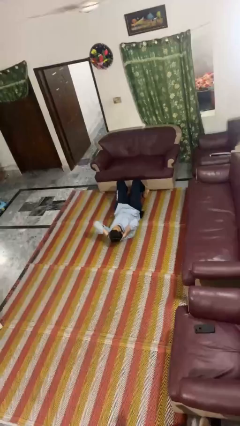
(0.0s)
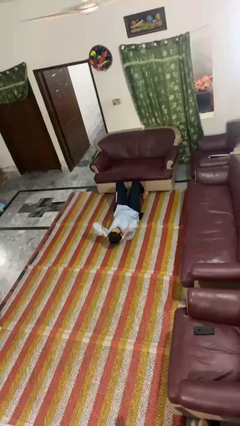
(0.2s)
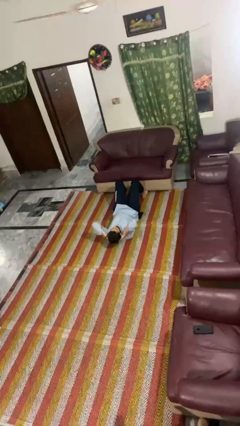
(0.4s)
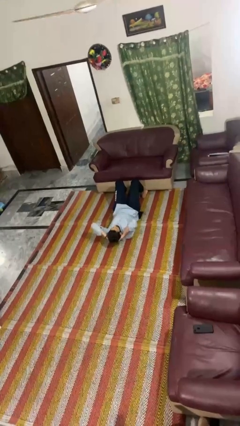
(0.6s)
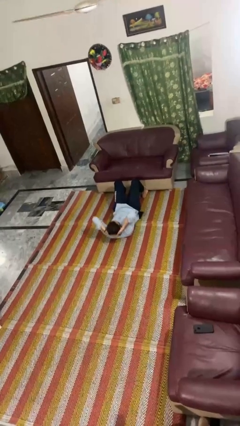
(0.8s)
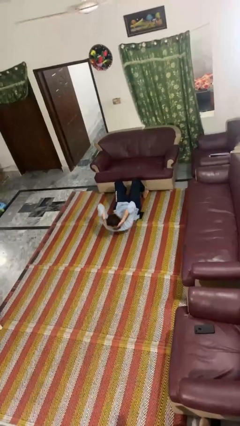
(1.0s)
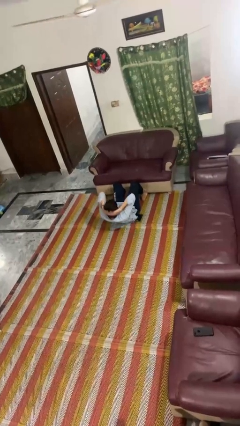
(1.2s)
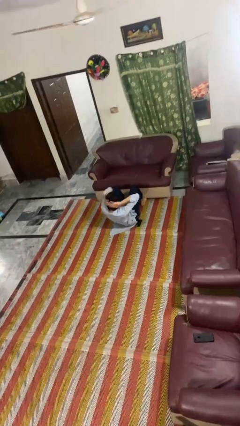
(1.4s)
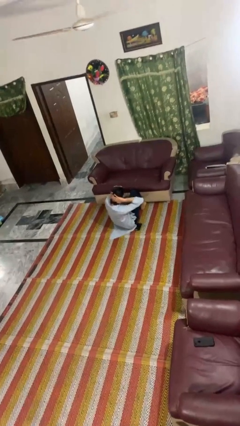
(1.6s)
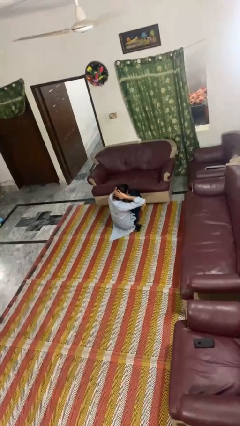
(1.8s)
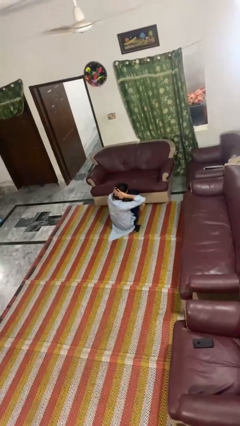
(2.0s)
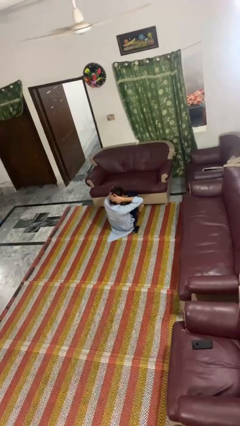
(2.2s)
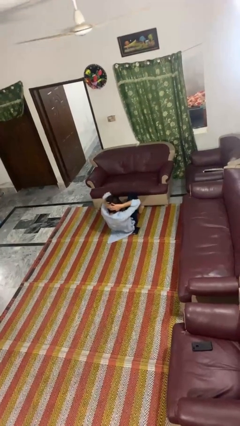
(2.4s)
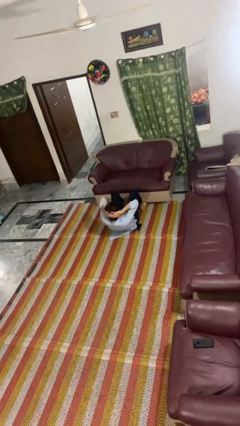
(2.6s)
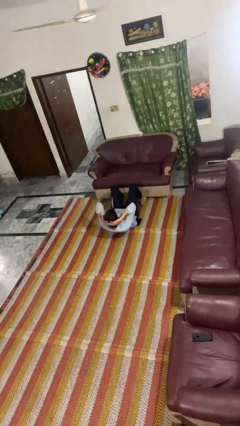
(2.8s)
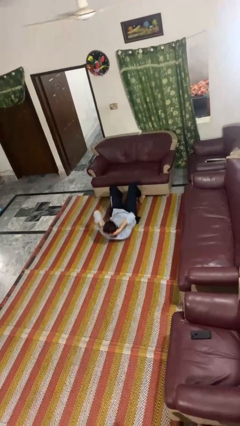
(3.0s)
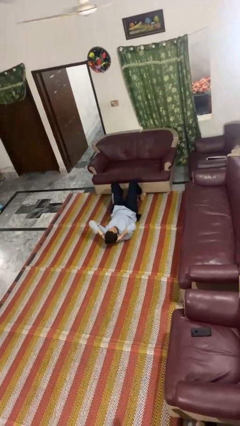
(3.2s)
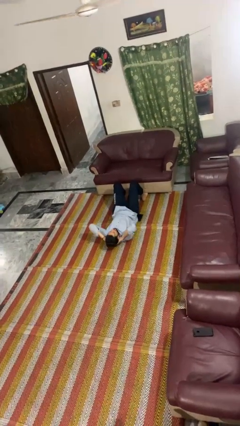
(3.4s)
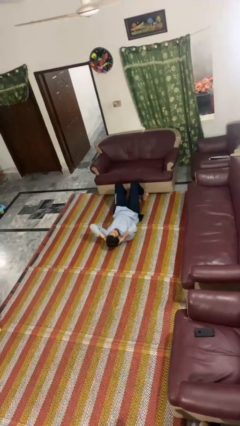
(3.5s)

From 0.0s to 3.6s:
person exercises with situp

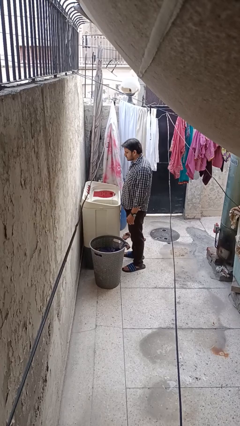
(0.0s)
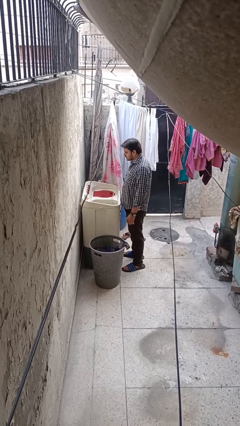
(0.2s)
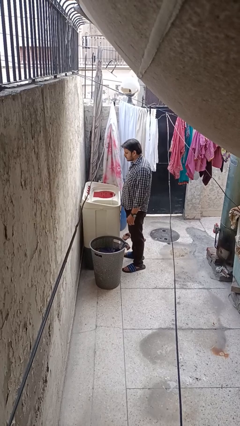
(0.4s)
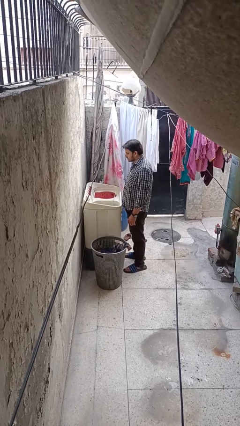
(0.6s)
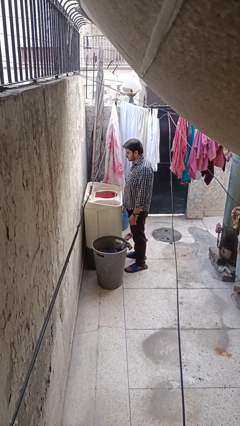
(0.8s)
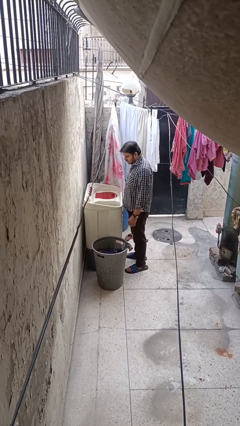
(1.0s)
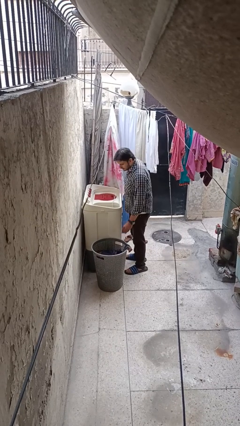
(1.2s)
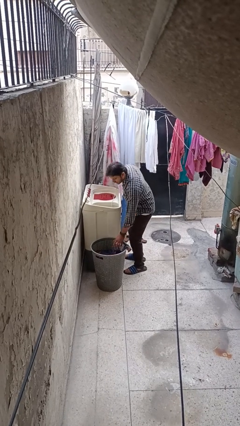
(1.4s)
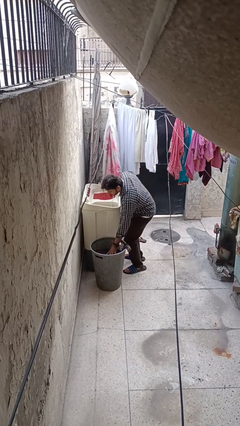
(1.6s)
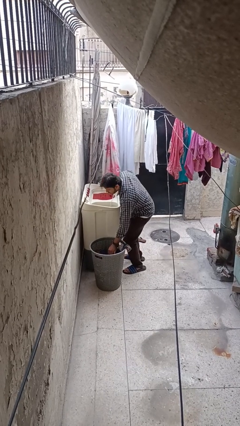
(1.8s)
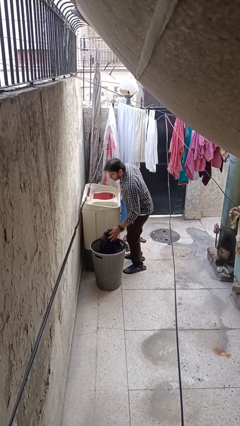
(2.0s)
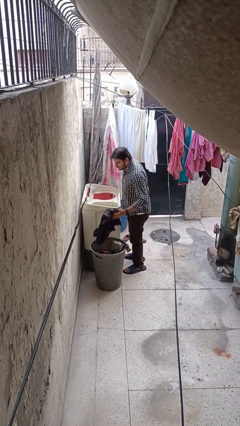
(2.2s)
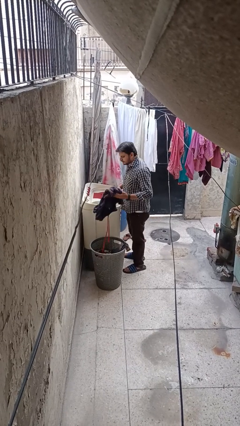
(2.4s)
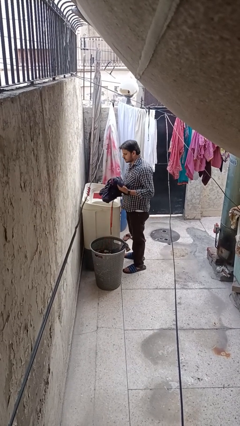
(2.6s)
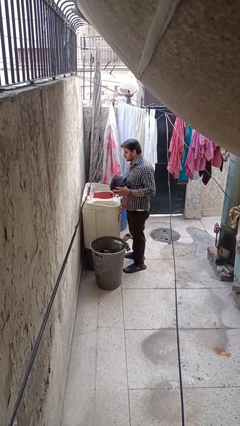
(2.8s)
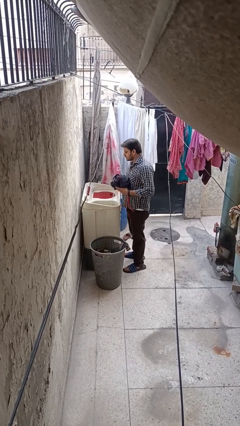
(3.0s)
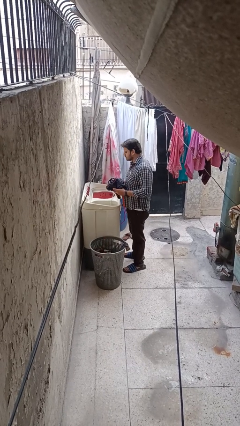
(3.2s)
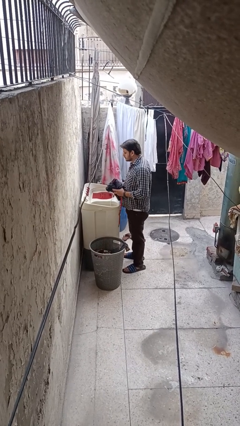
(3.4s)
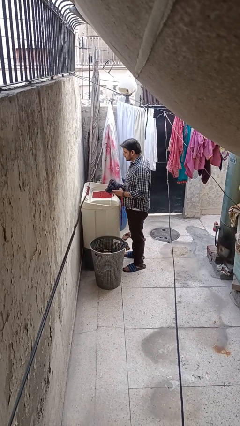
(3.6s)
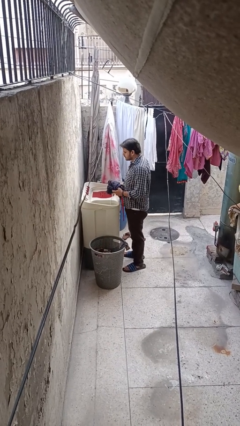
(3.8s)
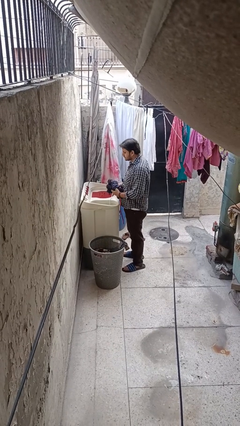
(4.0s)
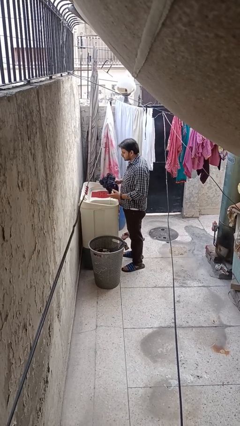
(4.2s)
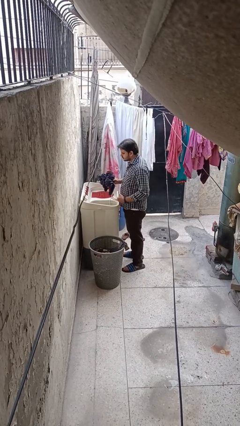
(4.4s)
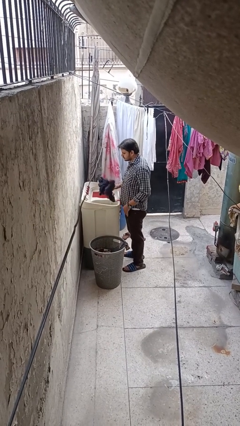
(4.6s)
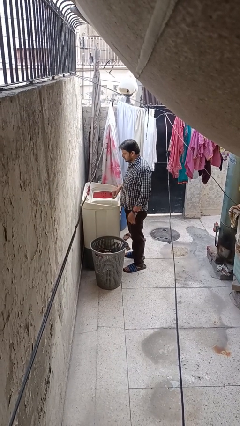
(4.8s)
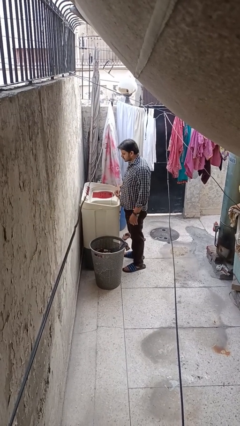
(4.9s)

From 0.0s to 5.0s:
person unloads clotheswasher

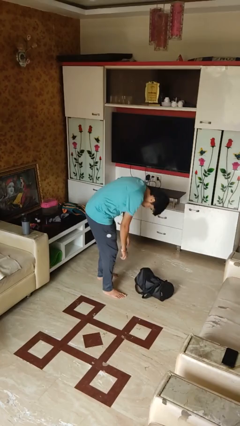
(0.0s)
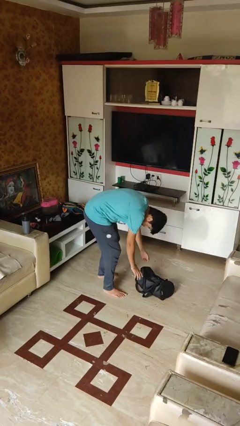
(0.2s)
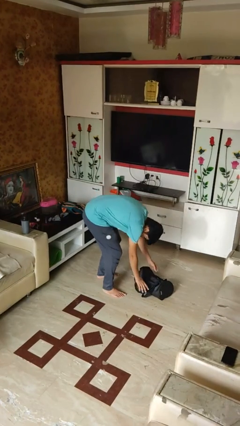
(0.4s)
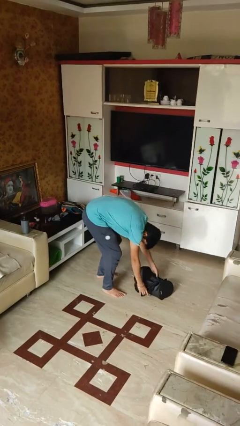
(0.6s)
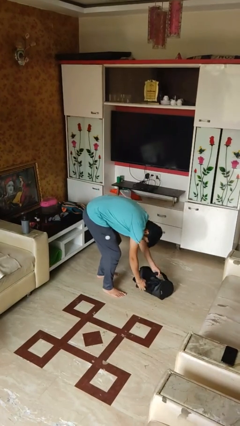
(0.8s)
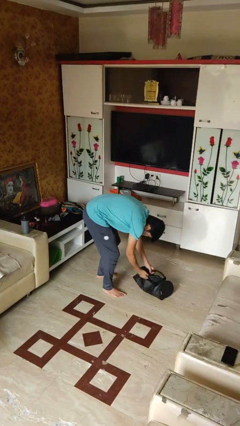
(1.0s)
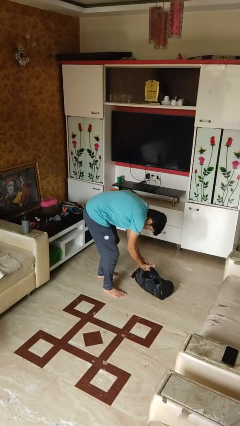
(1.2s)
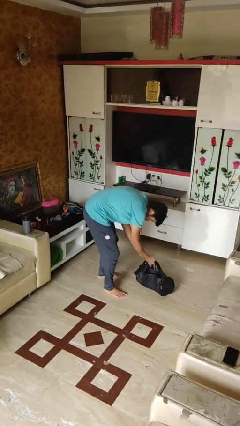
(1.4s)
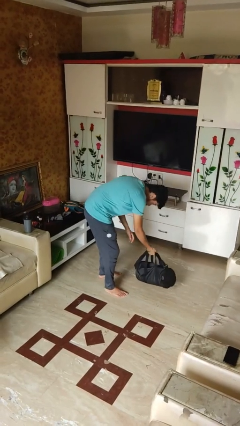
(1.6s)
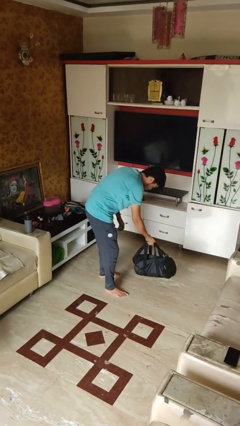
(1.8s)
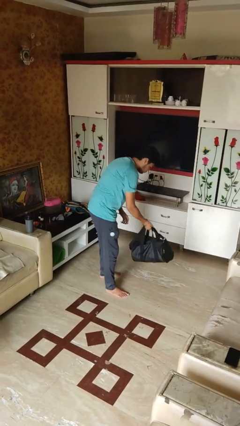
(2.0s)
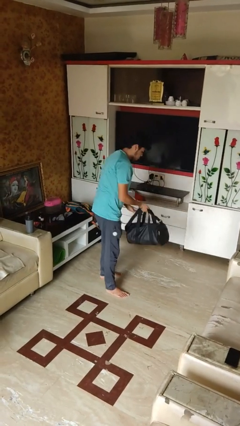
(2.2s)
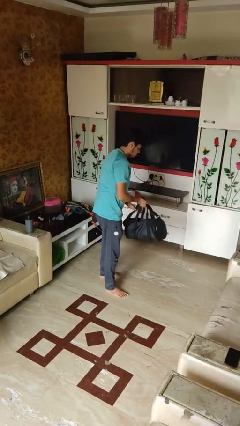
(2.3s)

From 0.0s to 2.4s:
person picks up object from floor

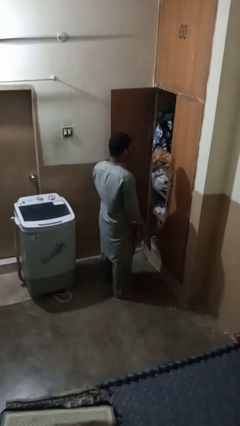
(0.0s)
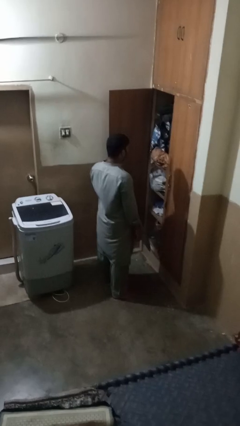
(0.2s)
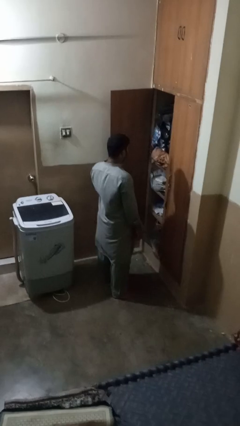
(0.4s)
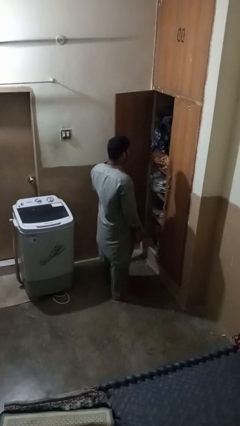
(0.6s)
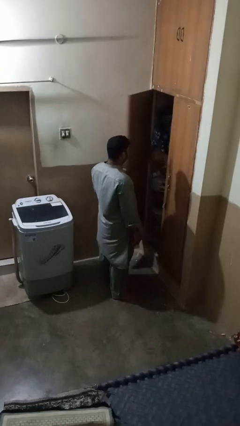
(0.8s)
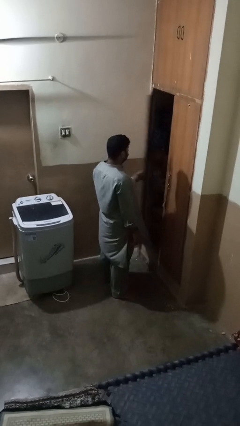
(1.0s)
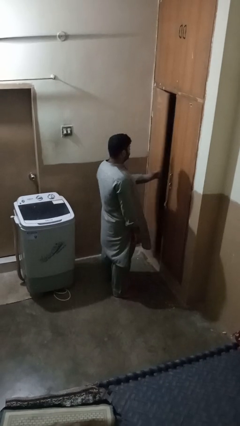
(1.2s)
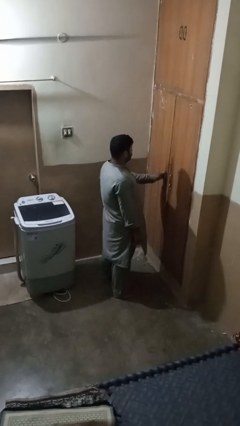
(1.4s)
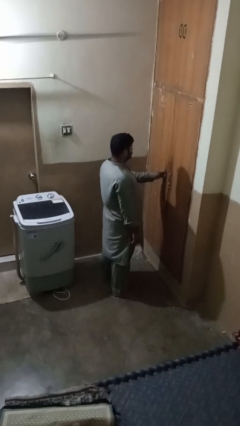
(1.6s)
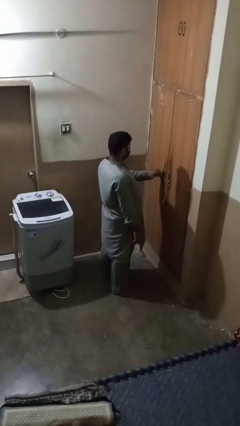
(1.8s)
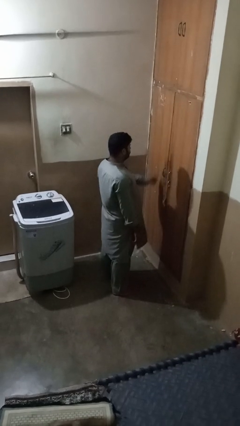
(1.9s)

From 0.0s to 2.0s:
person closes closet door

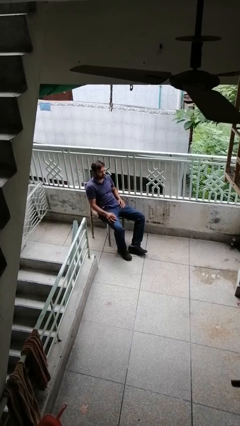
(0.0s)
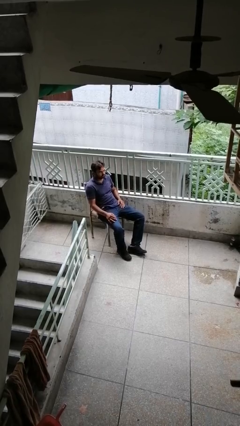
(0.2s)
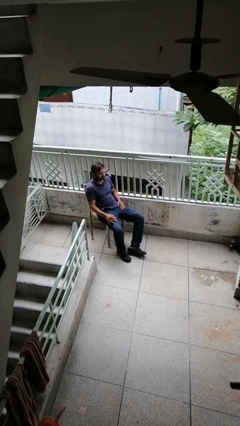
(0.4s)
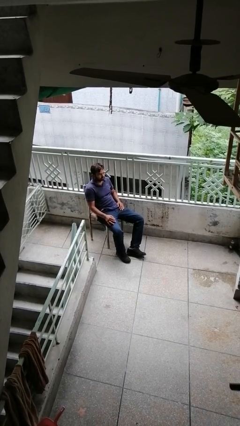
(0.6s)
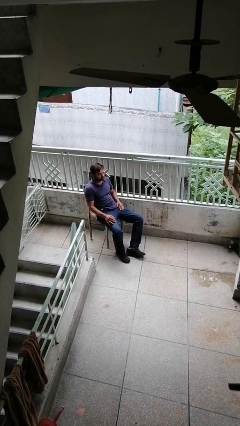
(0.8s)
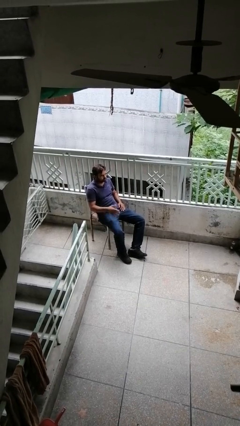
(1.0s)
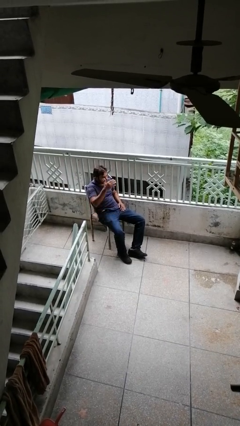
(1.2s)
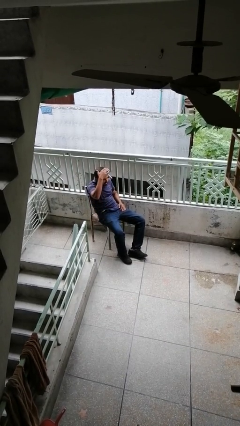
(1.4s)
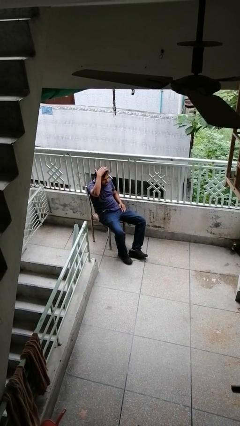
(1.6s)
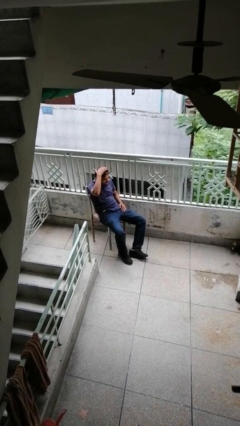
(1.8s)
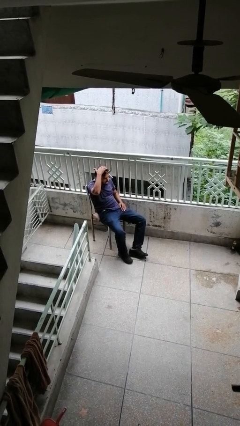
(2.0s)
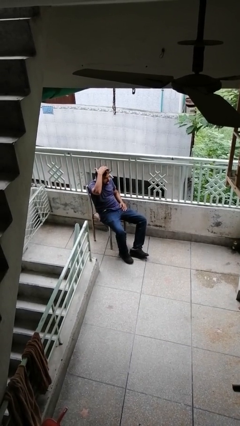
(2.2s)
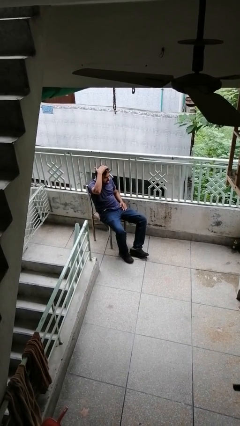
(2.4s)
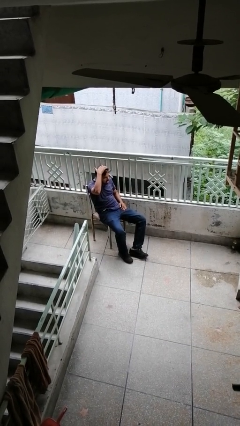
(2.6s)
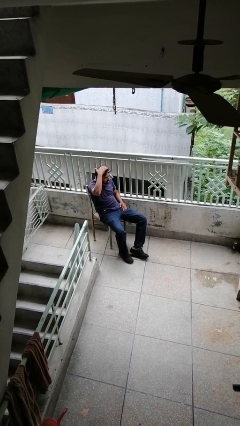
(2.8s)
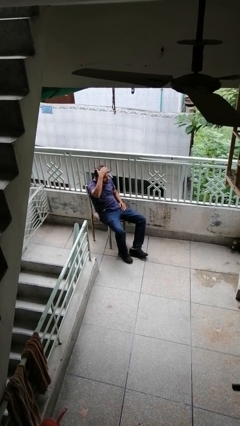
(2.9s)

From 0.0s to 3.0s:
person pats head

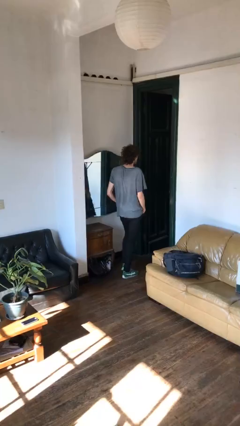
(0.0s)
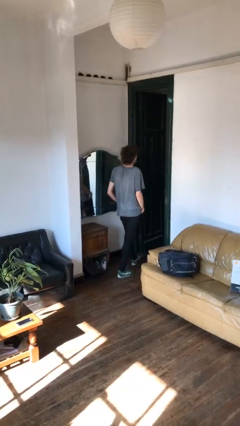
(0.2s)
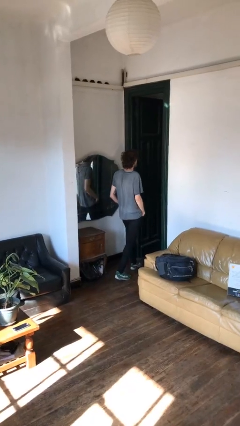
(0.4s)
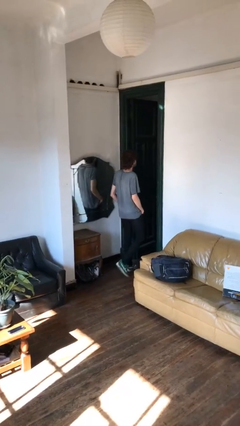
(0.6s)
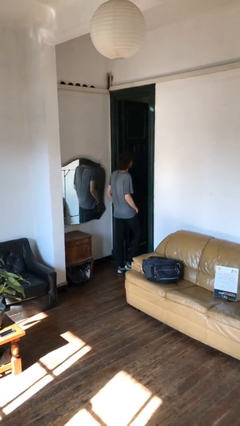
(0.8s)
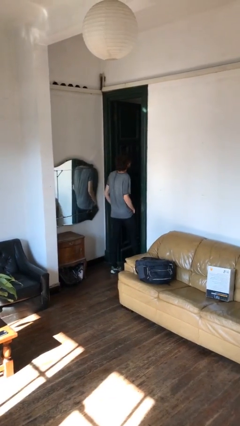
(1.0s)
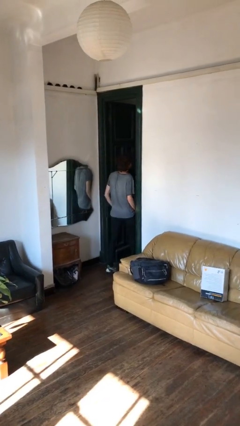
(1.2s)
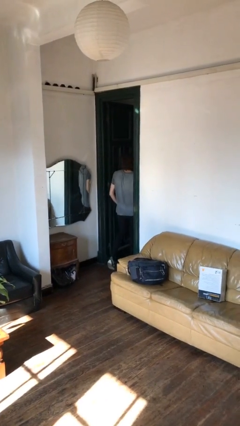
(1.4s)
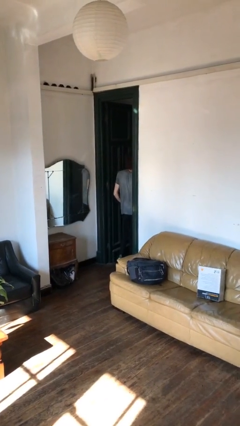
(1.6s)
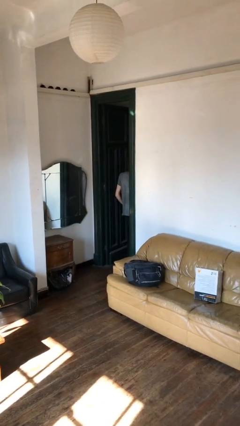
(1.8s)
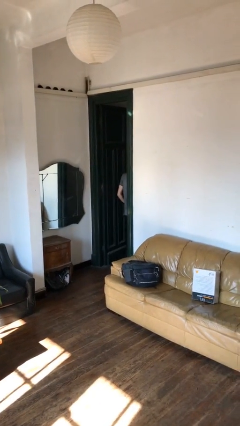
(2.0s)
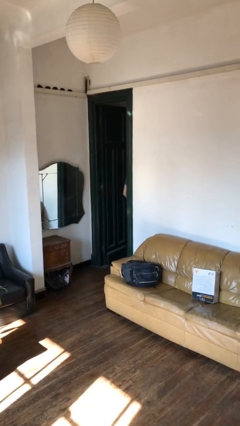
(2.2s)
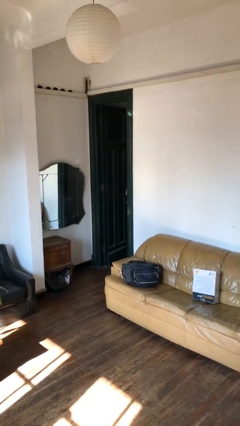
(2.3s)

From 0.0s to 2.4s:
person exits scene through structure
